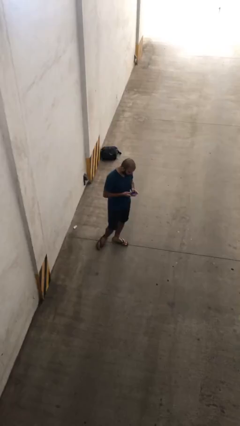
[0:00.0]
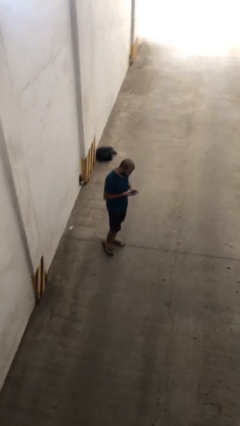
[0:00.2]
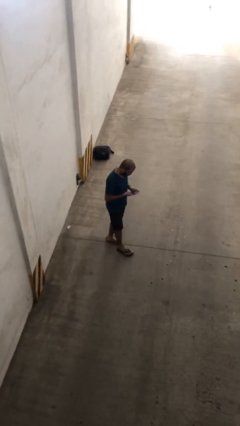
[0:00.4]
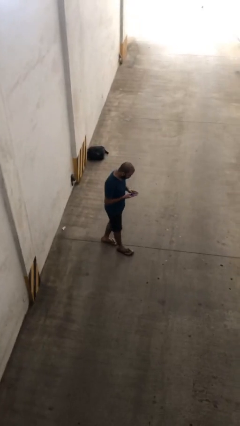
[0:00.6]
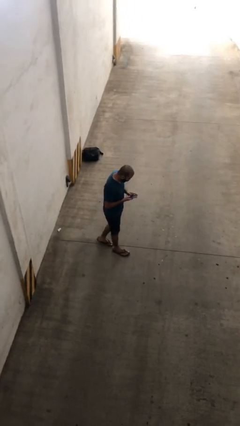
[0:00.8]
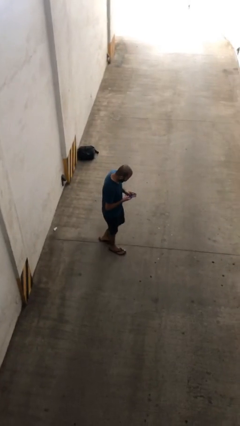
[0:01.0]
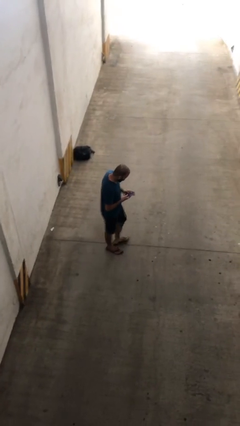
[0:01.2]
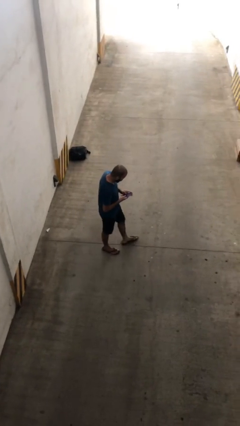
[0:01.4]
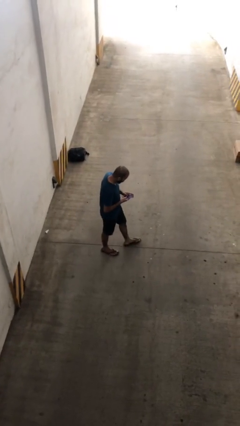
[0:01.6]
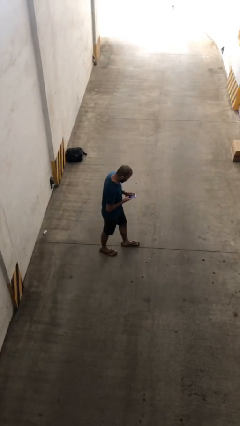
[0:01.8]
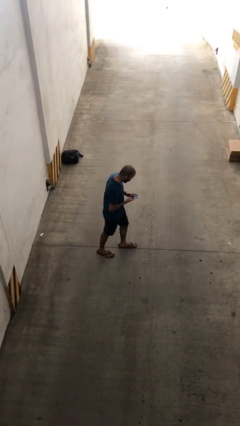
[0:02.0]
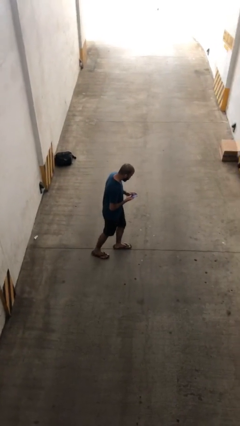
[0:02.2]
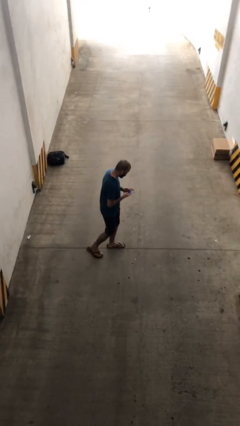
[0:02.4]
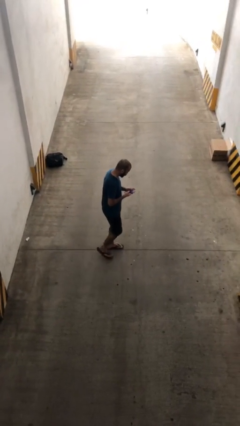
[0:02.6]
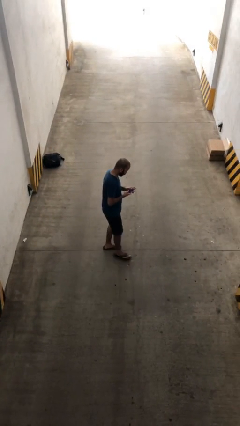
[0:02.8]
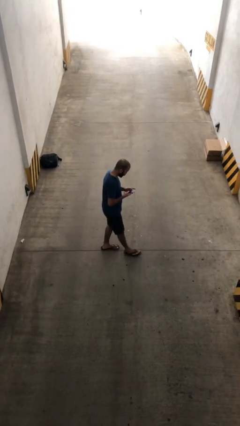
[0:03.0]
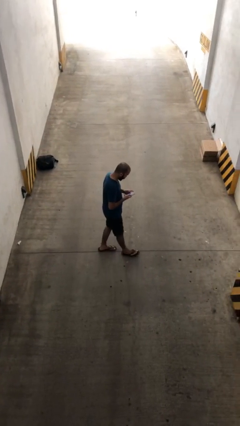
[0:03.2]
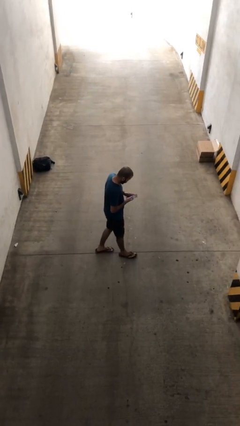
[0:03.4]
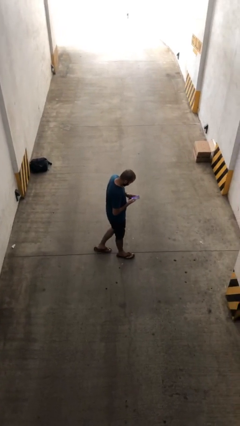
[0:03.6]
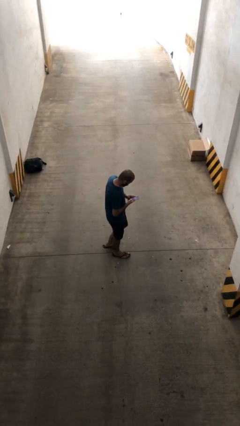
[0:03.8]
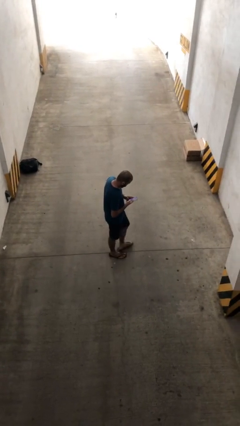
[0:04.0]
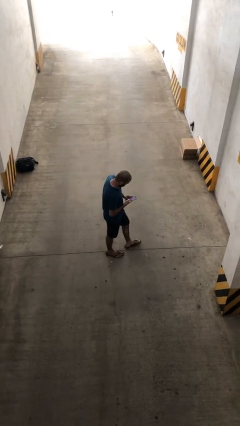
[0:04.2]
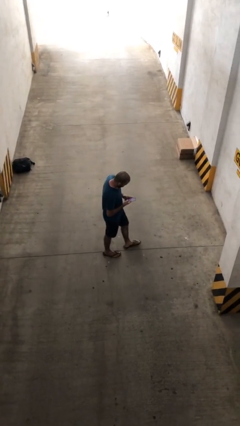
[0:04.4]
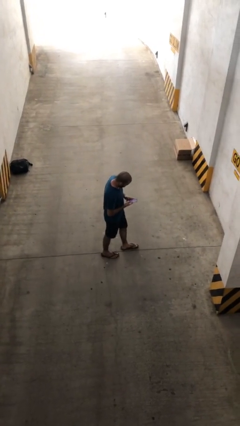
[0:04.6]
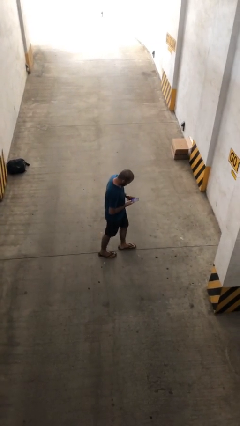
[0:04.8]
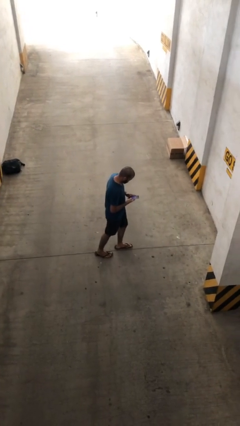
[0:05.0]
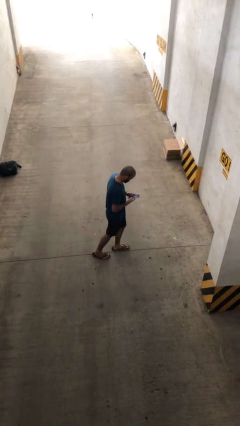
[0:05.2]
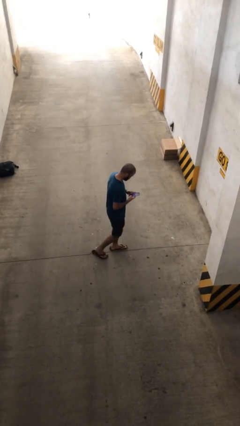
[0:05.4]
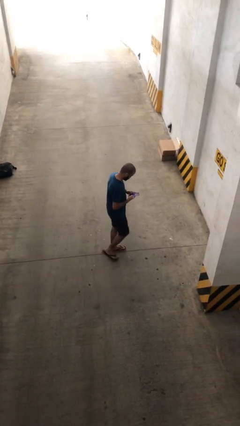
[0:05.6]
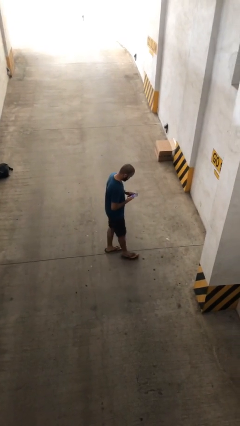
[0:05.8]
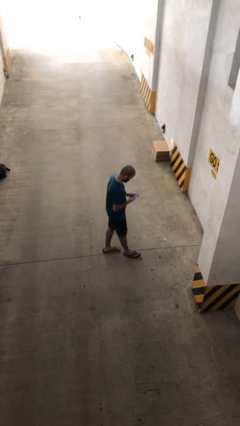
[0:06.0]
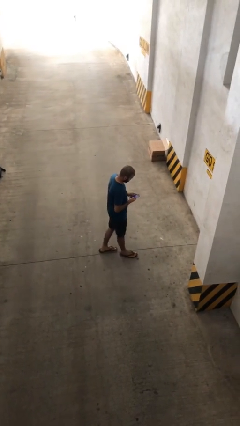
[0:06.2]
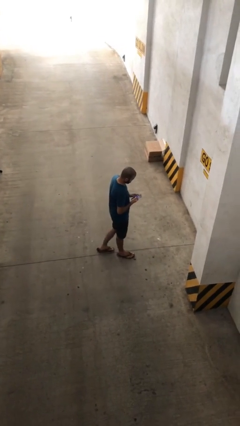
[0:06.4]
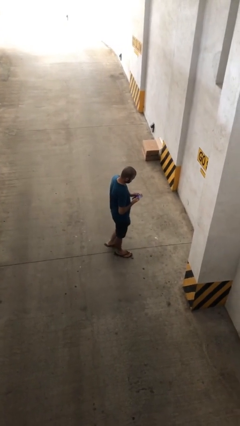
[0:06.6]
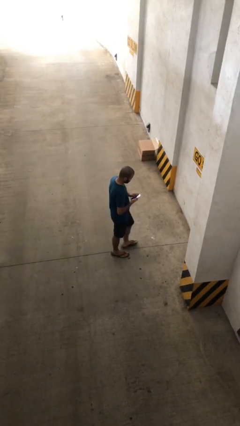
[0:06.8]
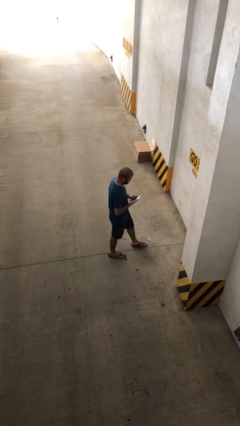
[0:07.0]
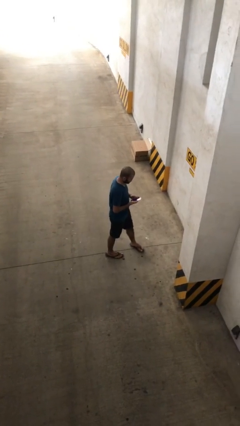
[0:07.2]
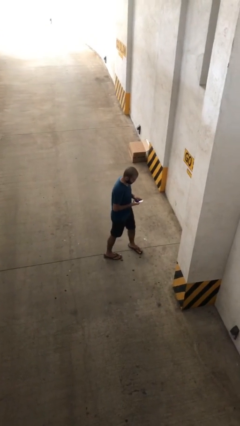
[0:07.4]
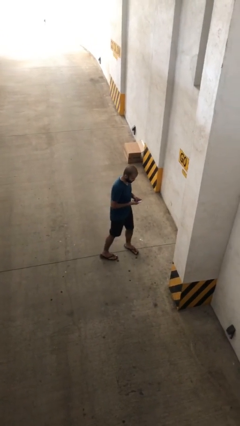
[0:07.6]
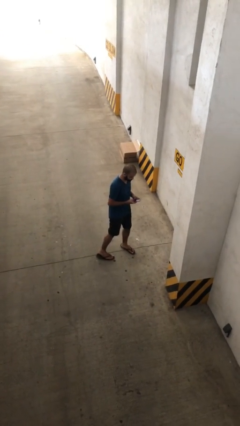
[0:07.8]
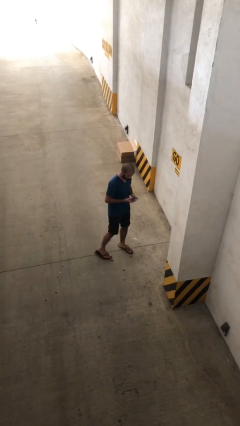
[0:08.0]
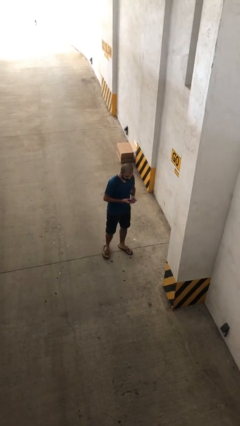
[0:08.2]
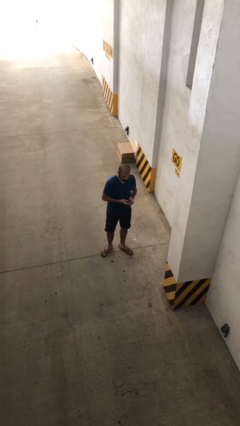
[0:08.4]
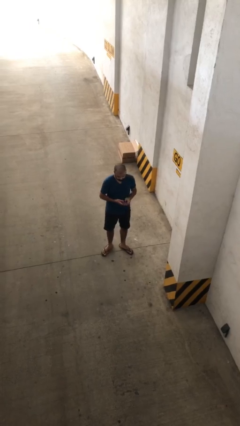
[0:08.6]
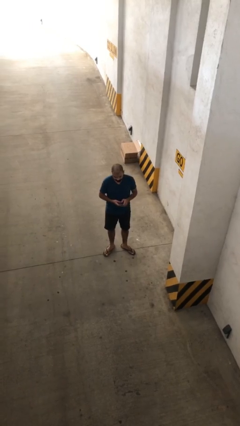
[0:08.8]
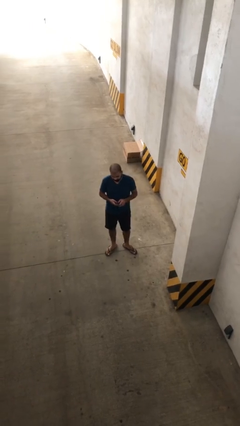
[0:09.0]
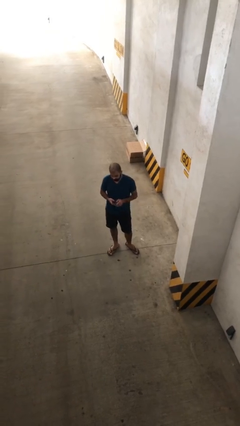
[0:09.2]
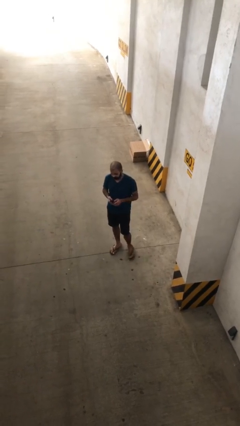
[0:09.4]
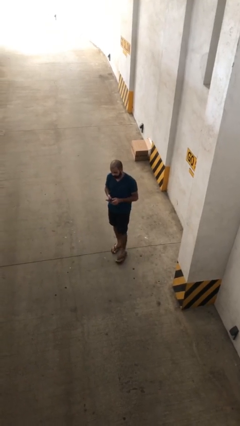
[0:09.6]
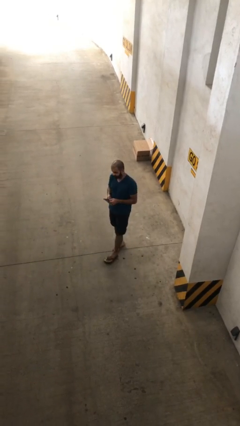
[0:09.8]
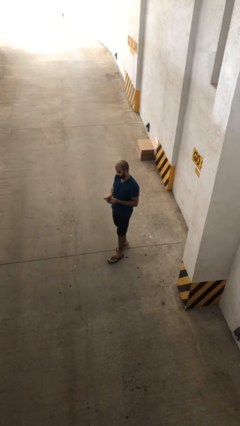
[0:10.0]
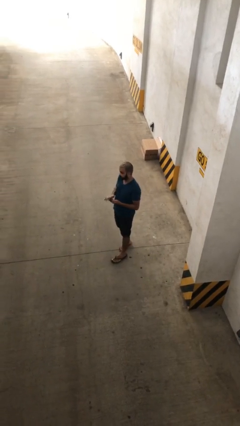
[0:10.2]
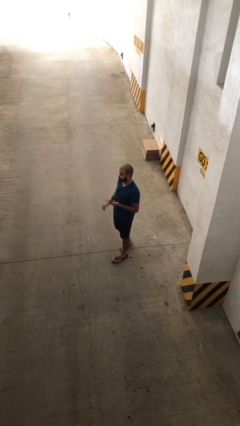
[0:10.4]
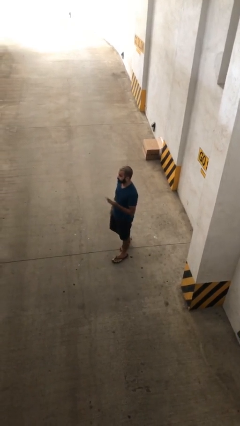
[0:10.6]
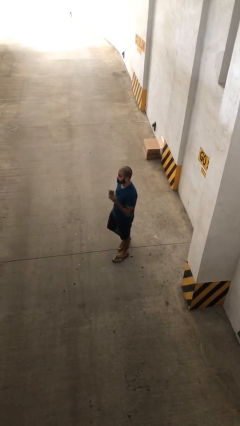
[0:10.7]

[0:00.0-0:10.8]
person texts on phone

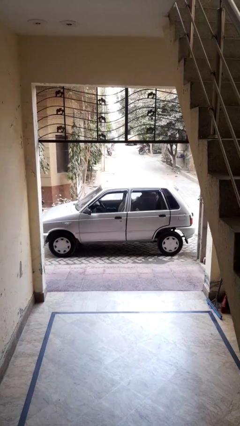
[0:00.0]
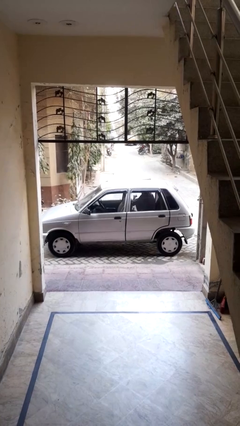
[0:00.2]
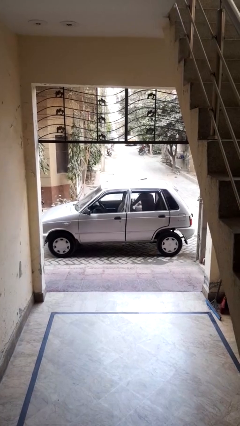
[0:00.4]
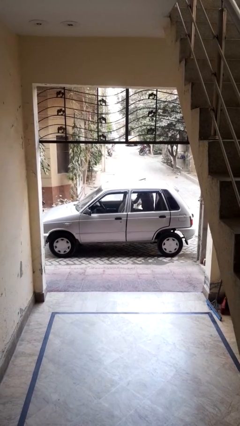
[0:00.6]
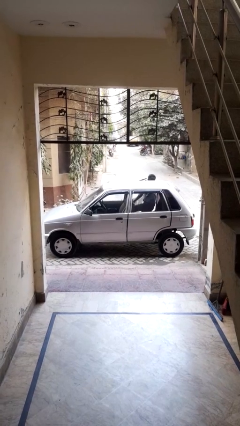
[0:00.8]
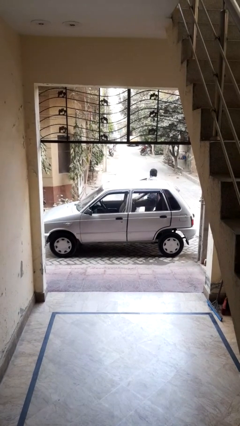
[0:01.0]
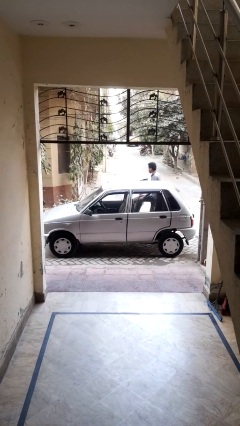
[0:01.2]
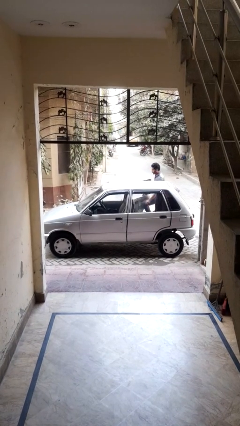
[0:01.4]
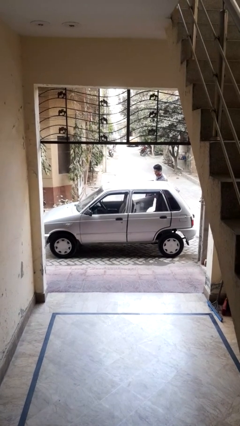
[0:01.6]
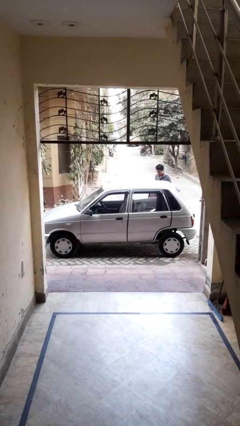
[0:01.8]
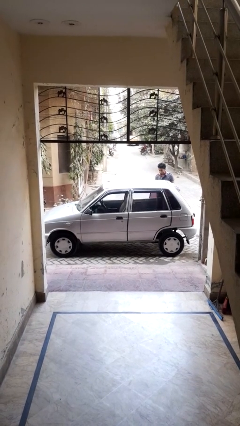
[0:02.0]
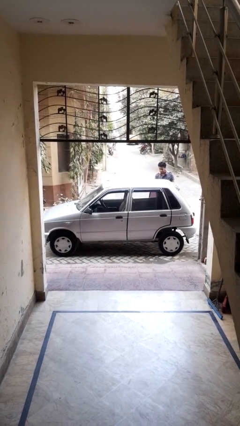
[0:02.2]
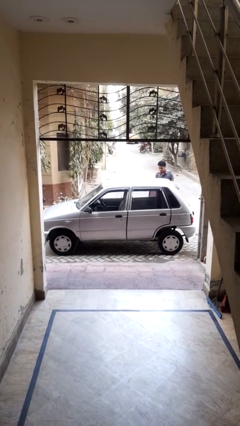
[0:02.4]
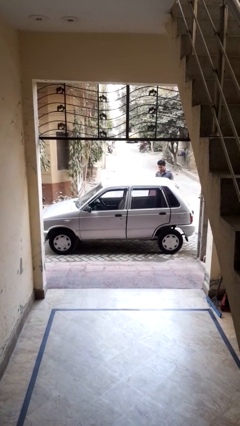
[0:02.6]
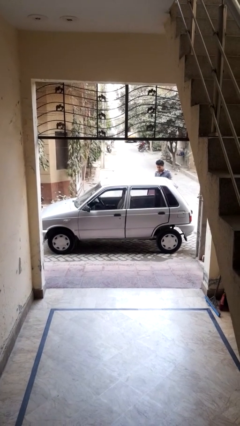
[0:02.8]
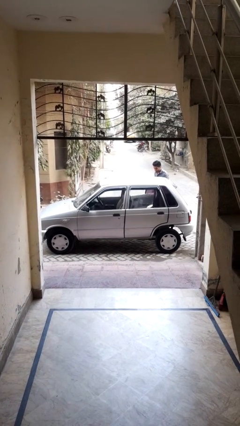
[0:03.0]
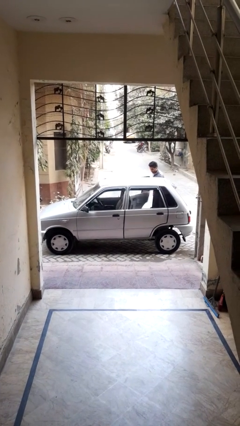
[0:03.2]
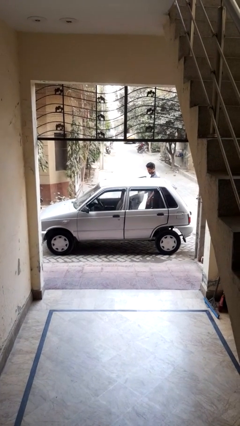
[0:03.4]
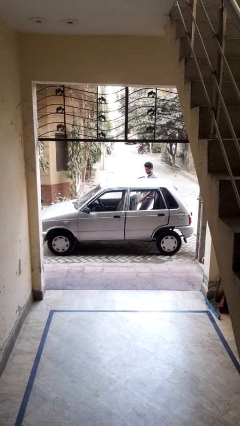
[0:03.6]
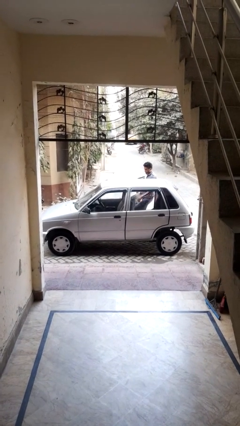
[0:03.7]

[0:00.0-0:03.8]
car drops off person

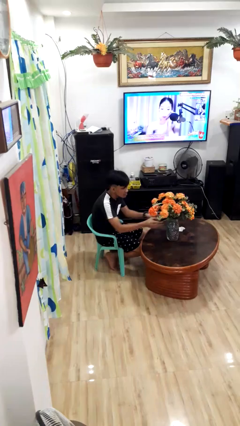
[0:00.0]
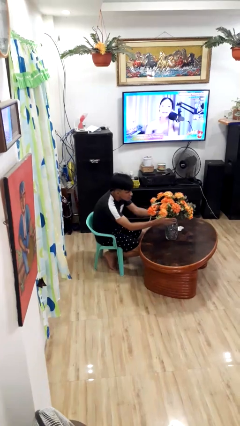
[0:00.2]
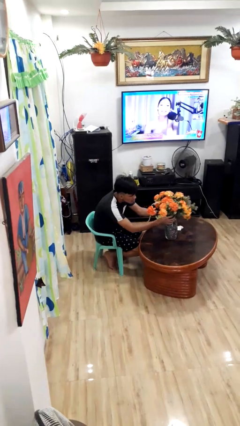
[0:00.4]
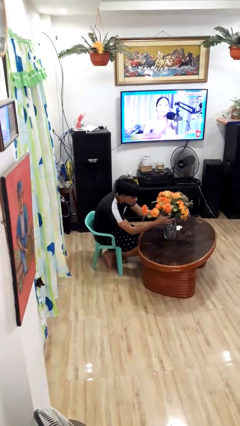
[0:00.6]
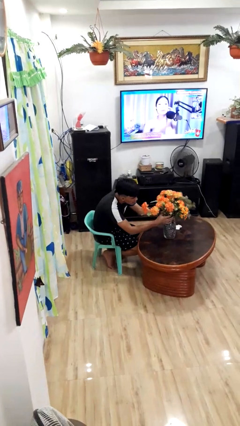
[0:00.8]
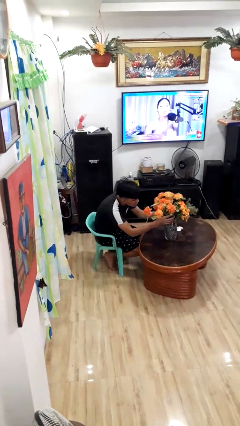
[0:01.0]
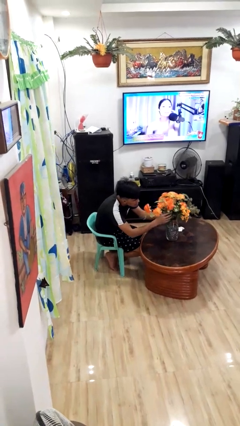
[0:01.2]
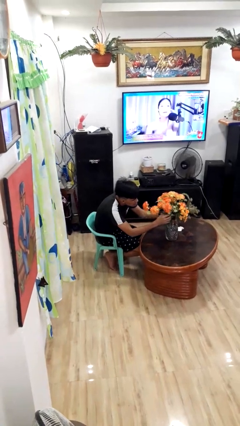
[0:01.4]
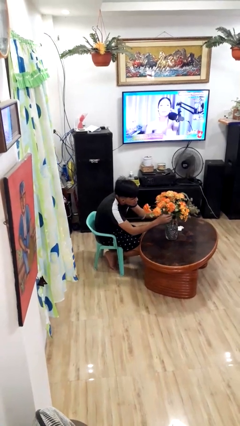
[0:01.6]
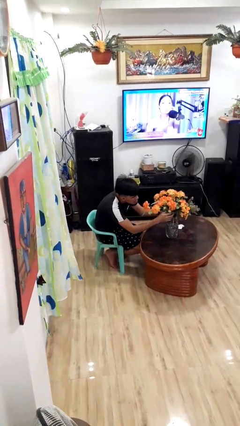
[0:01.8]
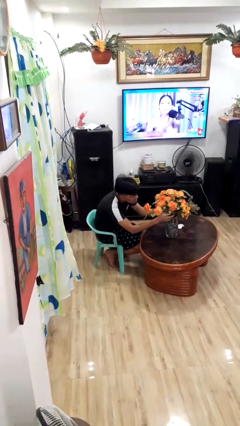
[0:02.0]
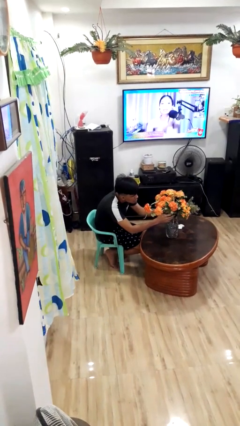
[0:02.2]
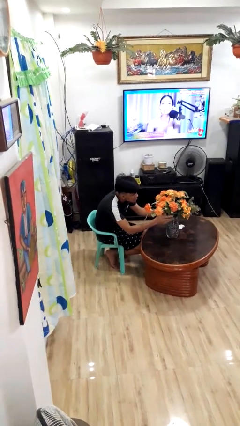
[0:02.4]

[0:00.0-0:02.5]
person arranges flowers in vase

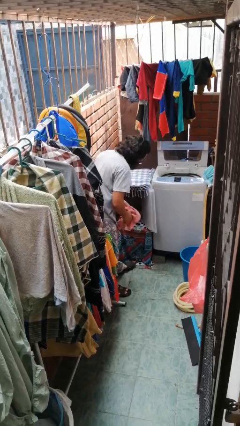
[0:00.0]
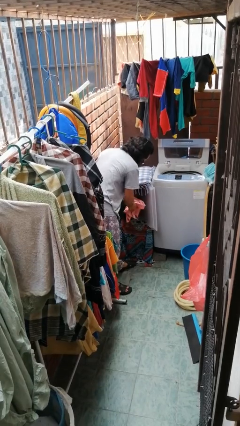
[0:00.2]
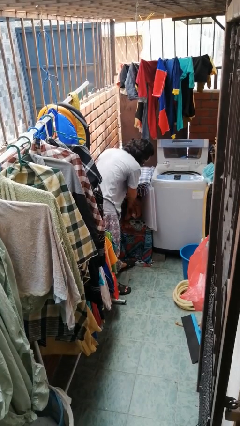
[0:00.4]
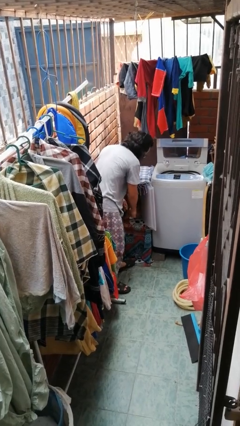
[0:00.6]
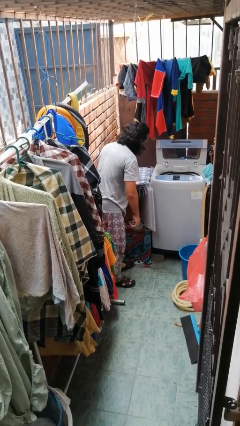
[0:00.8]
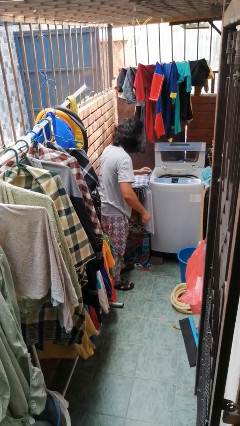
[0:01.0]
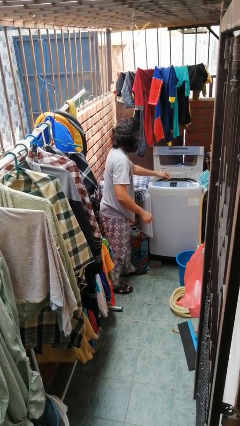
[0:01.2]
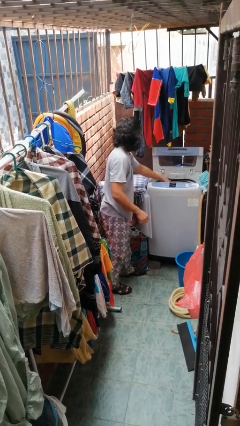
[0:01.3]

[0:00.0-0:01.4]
person loads dryer
